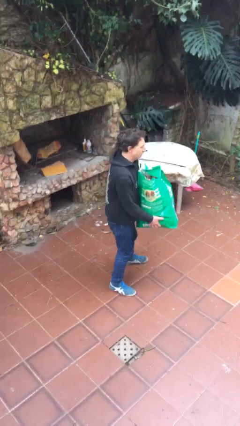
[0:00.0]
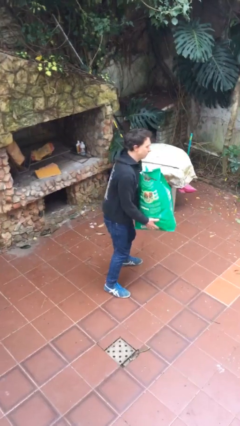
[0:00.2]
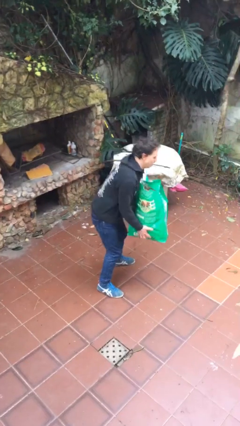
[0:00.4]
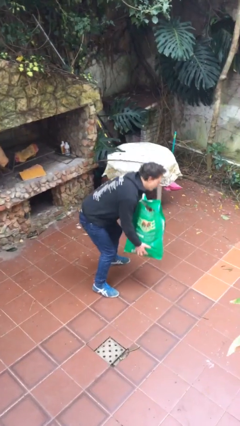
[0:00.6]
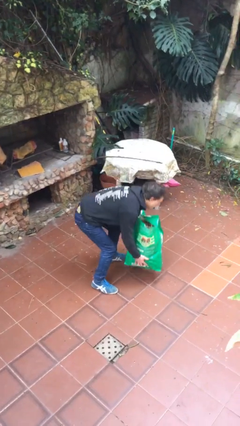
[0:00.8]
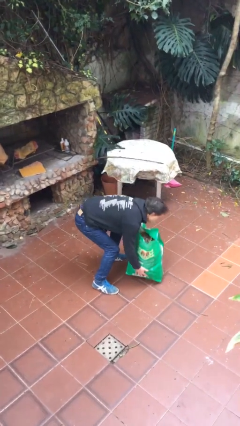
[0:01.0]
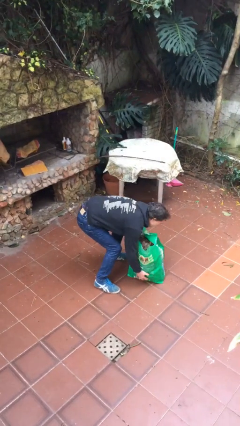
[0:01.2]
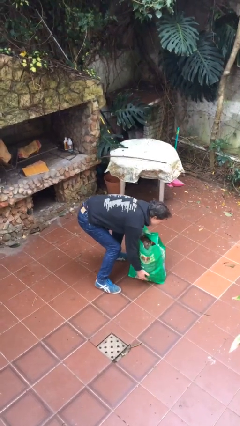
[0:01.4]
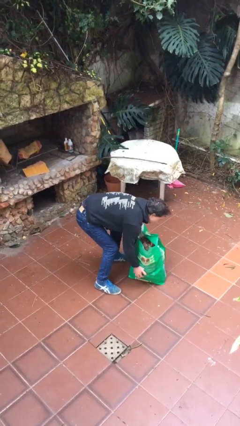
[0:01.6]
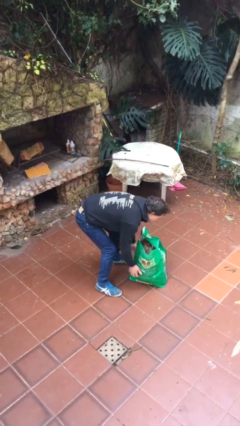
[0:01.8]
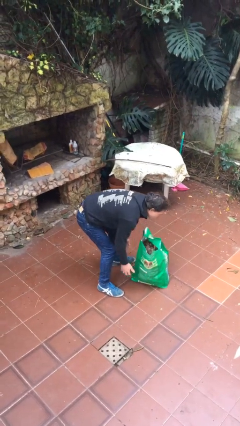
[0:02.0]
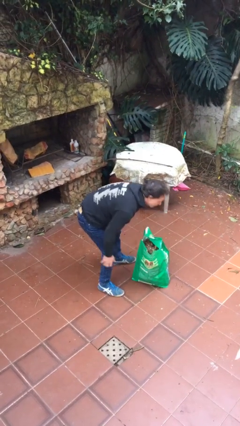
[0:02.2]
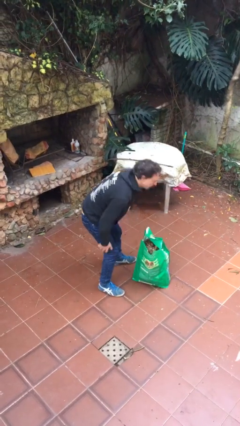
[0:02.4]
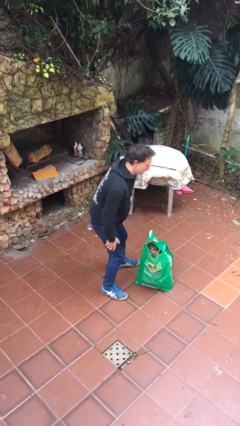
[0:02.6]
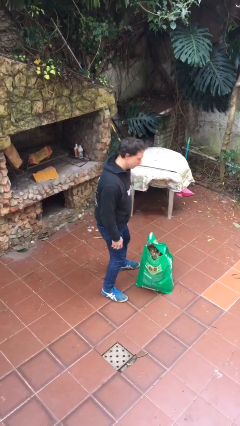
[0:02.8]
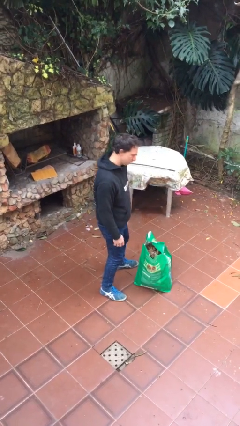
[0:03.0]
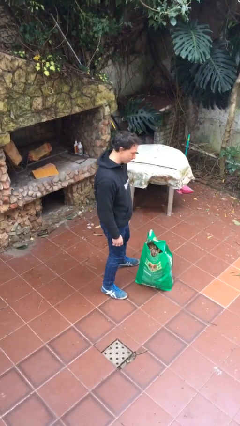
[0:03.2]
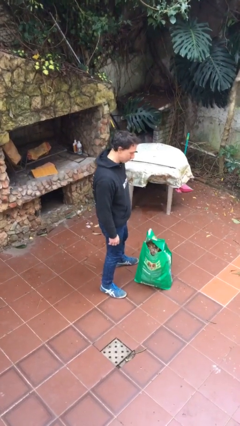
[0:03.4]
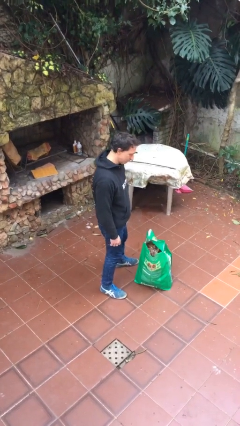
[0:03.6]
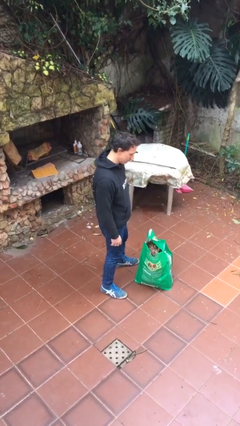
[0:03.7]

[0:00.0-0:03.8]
person puts down object on floor

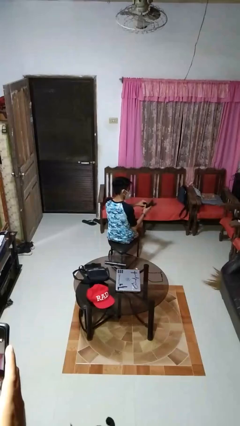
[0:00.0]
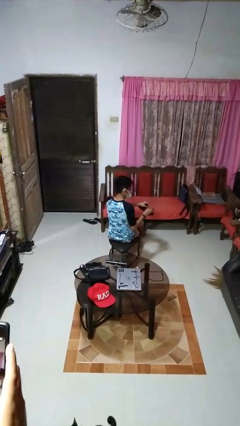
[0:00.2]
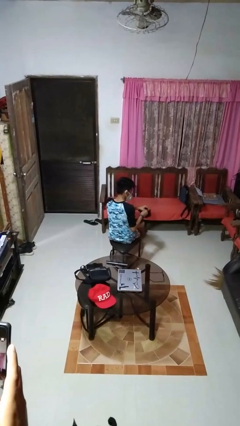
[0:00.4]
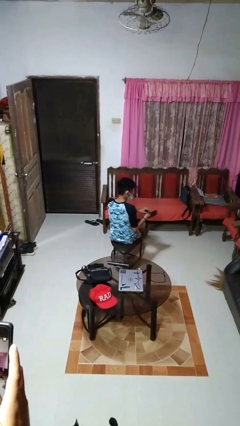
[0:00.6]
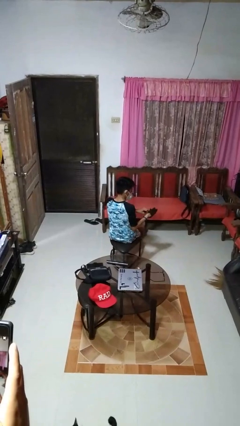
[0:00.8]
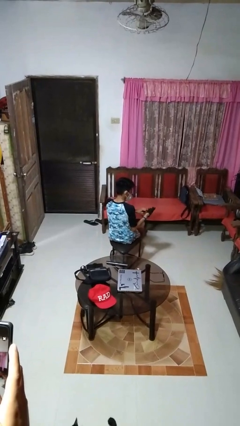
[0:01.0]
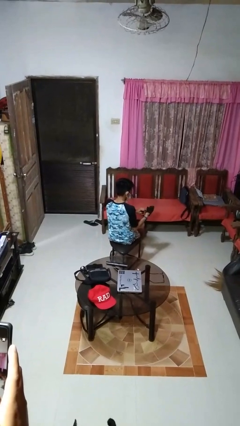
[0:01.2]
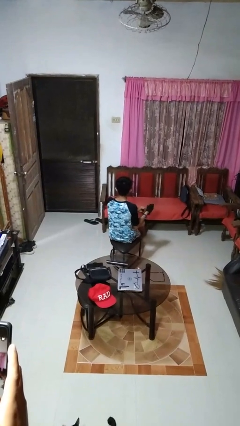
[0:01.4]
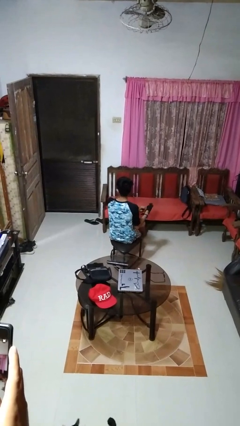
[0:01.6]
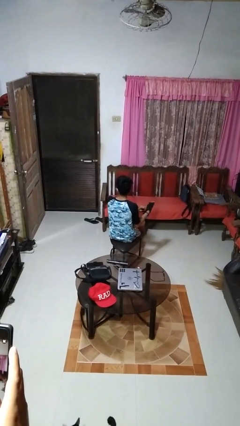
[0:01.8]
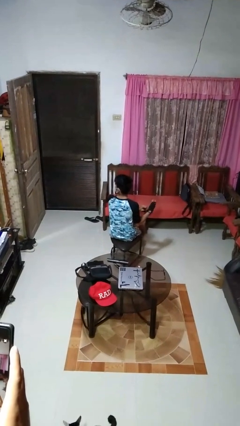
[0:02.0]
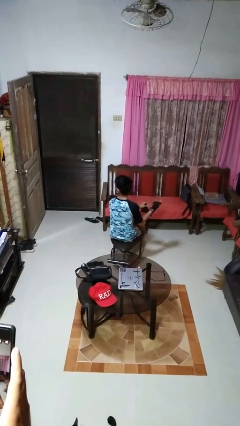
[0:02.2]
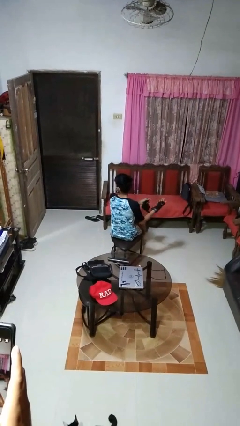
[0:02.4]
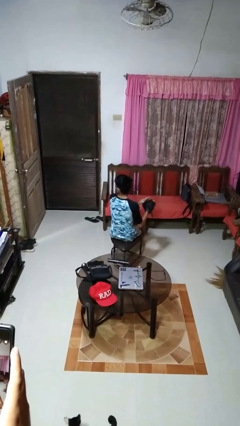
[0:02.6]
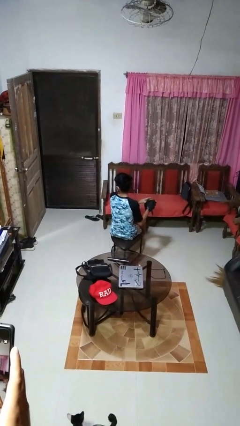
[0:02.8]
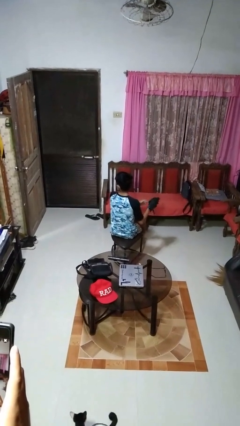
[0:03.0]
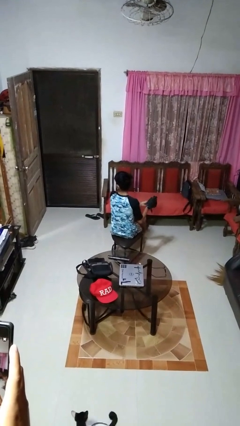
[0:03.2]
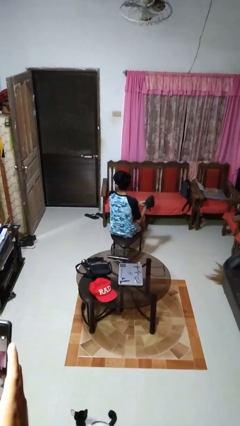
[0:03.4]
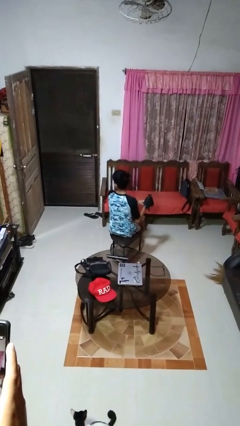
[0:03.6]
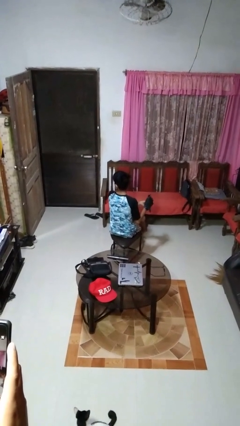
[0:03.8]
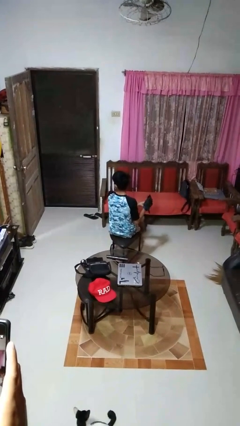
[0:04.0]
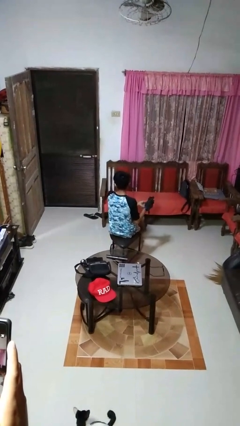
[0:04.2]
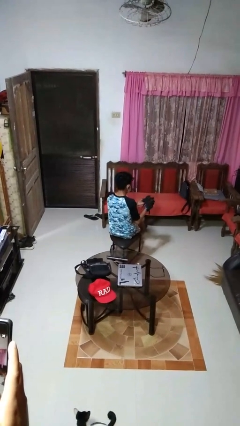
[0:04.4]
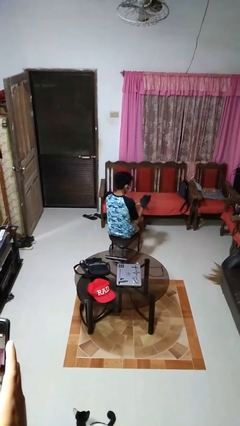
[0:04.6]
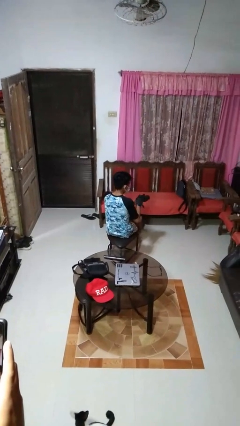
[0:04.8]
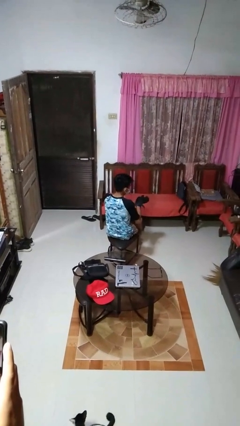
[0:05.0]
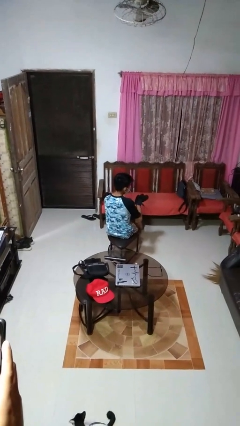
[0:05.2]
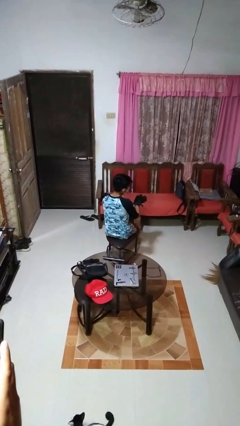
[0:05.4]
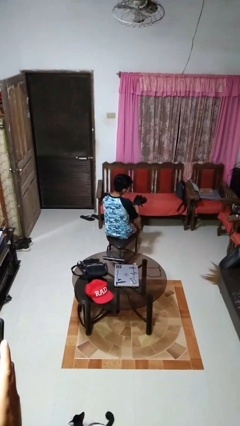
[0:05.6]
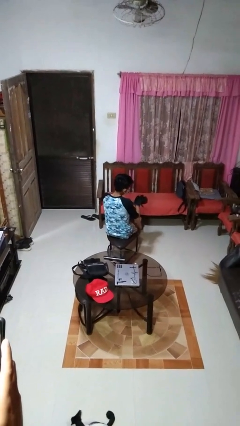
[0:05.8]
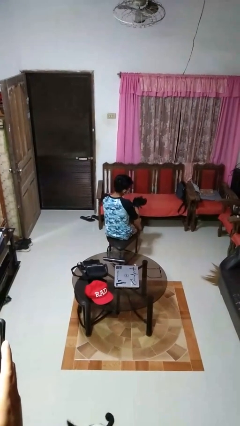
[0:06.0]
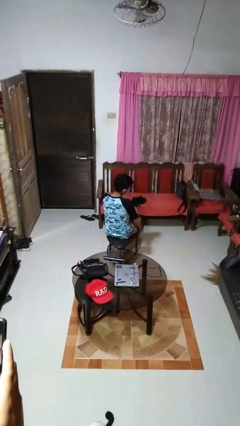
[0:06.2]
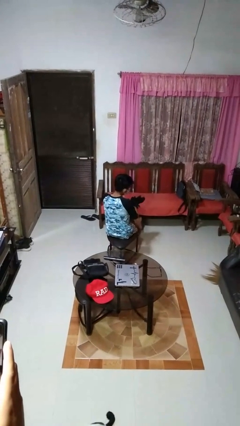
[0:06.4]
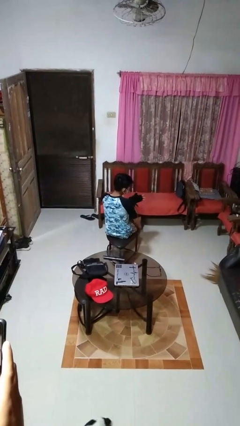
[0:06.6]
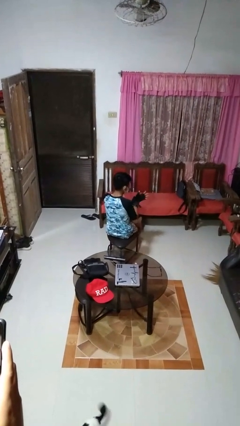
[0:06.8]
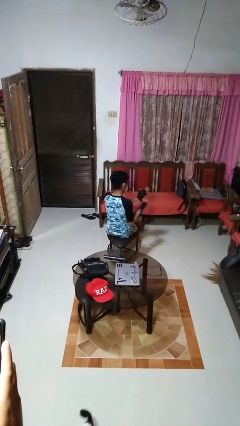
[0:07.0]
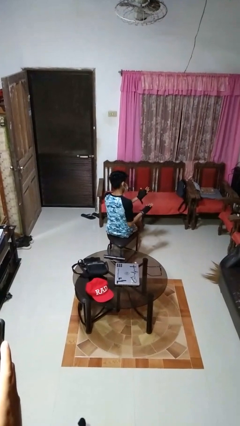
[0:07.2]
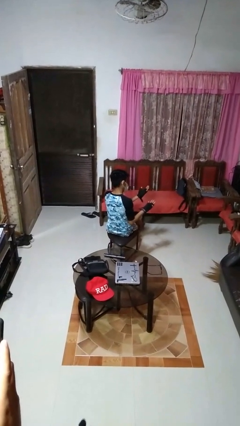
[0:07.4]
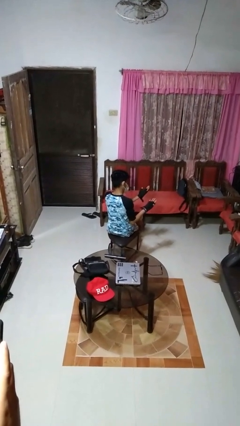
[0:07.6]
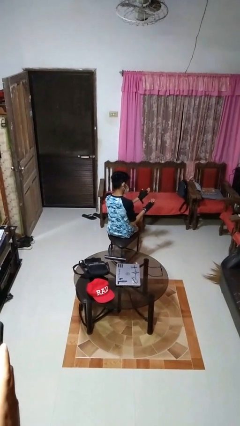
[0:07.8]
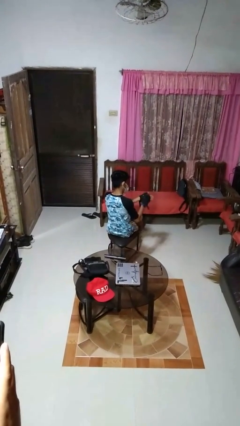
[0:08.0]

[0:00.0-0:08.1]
person puts on gloves

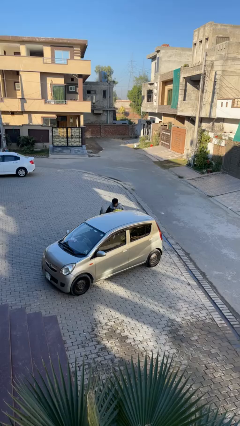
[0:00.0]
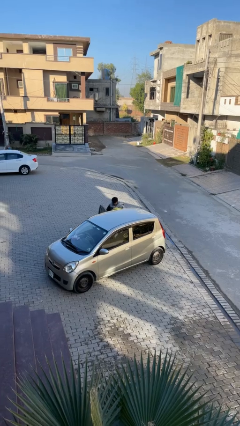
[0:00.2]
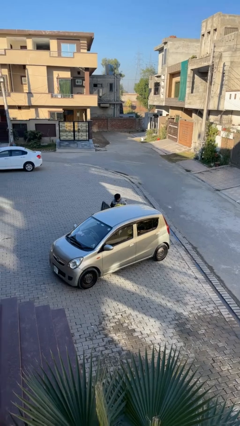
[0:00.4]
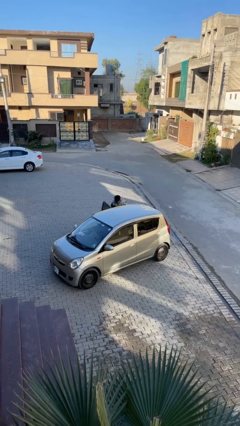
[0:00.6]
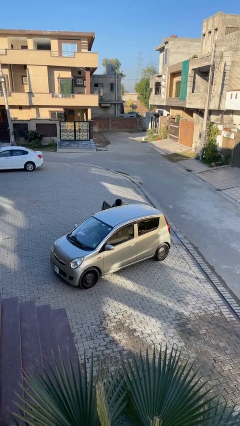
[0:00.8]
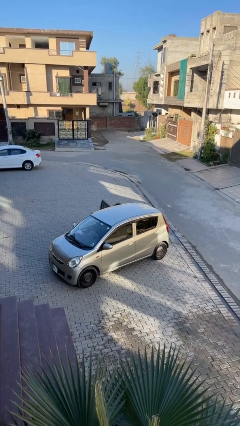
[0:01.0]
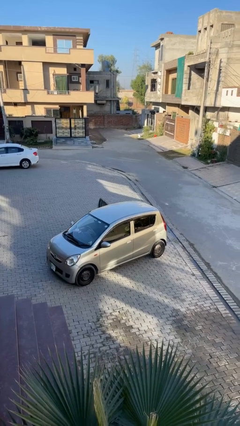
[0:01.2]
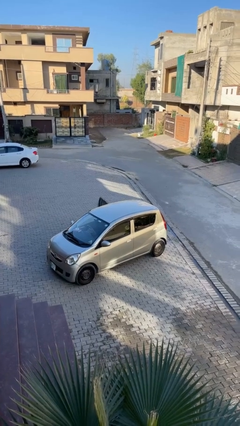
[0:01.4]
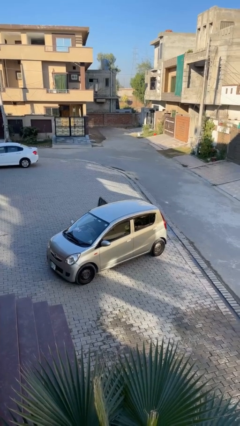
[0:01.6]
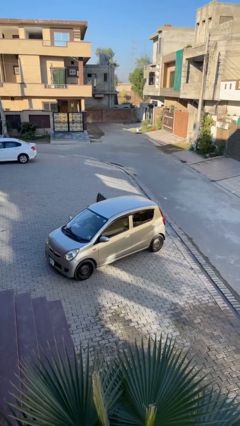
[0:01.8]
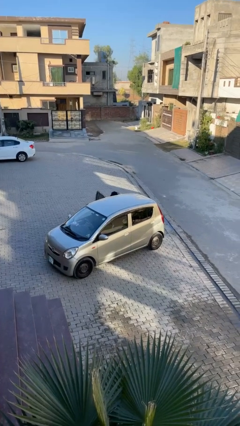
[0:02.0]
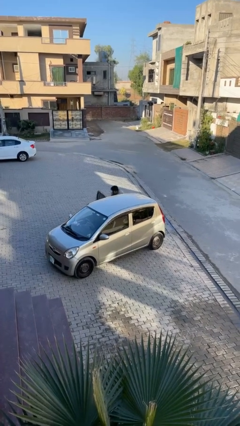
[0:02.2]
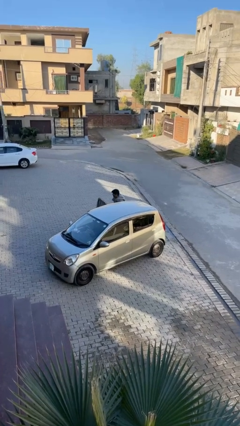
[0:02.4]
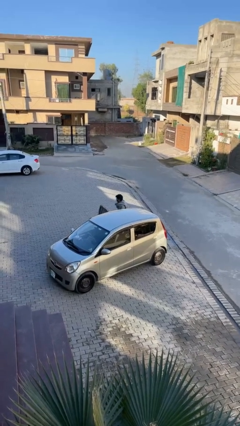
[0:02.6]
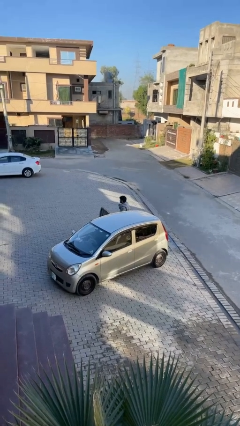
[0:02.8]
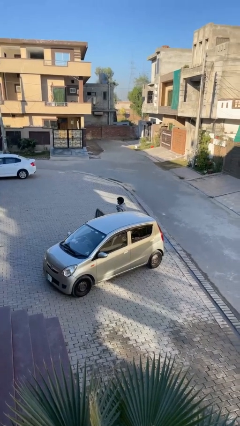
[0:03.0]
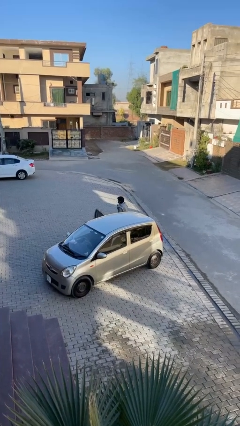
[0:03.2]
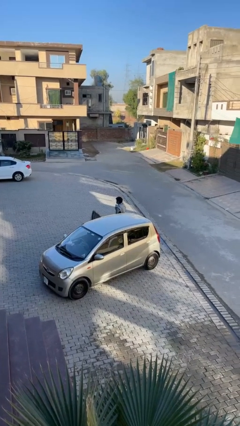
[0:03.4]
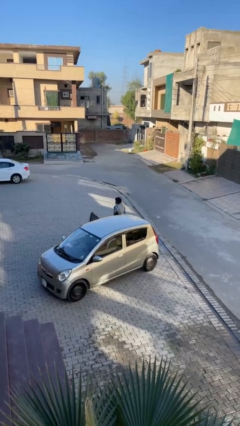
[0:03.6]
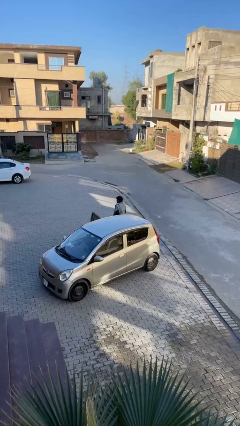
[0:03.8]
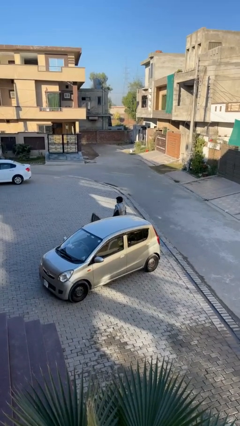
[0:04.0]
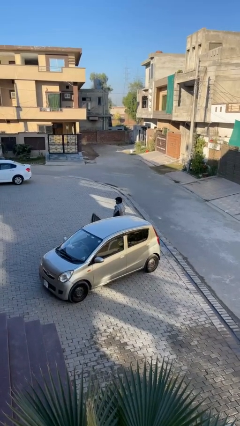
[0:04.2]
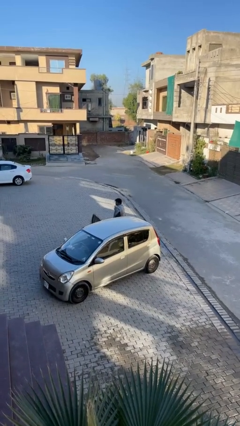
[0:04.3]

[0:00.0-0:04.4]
person loads car

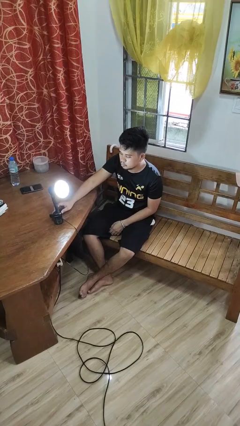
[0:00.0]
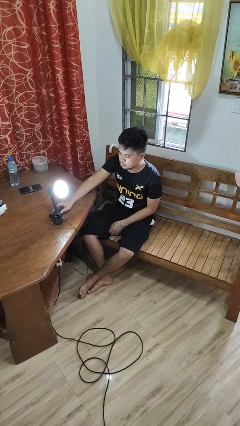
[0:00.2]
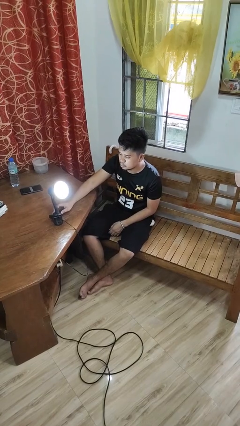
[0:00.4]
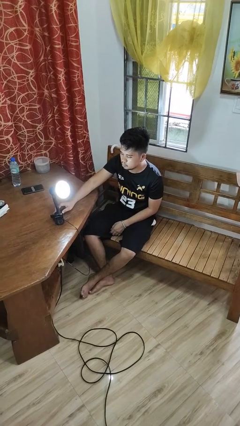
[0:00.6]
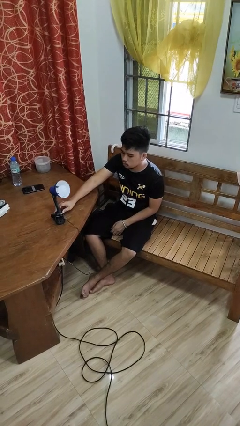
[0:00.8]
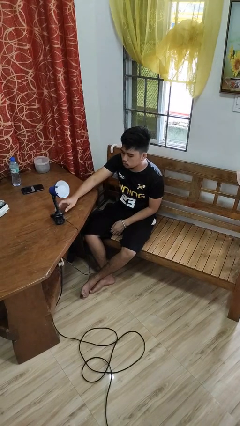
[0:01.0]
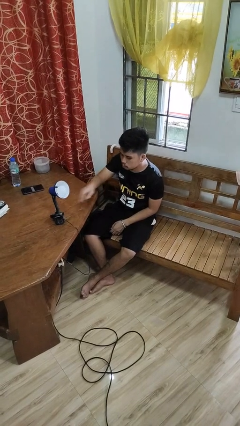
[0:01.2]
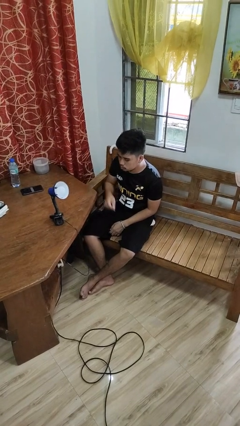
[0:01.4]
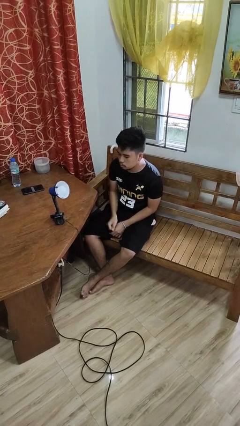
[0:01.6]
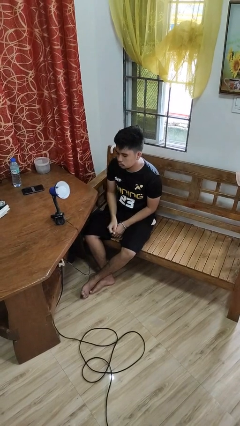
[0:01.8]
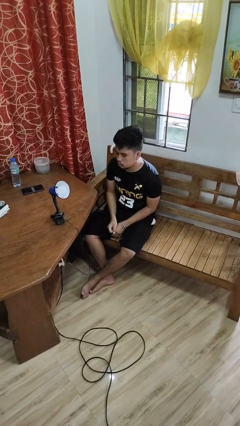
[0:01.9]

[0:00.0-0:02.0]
person turns off lamp
